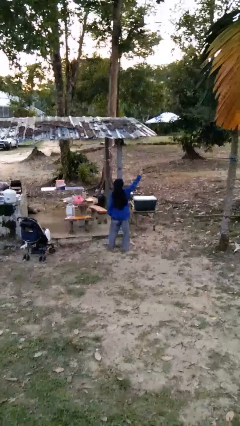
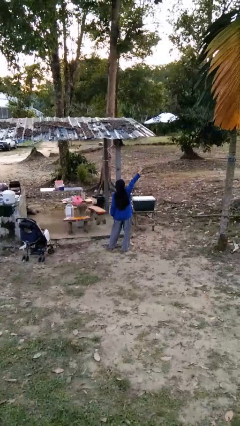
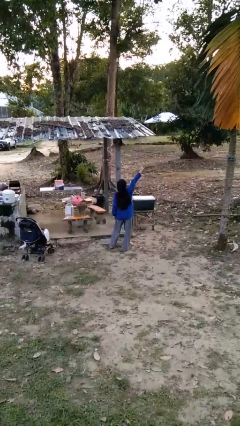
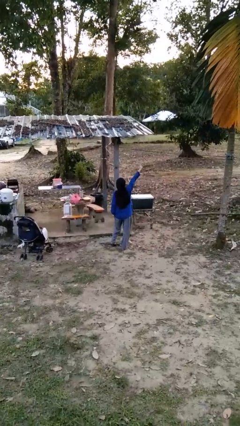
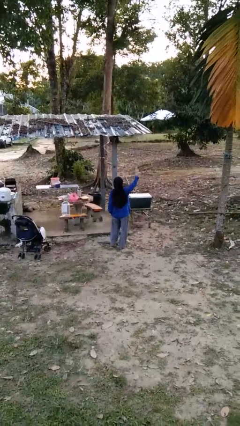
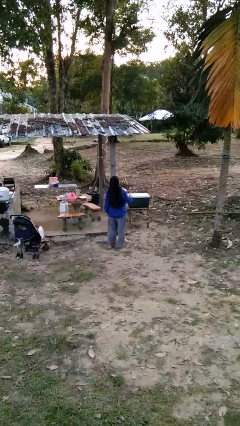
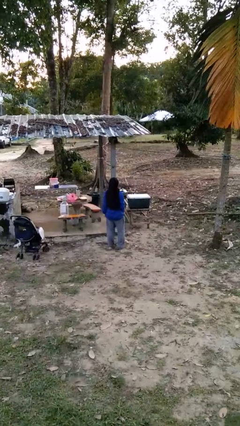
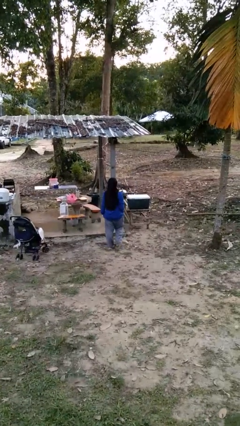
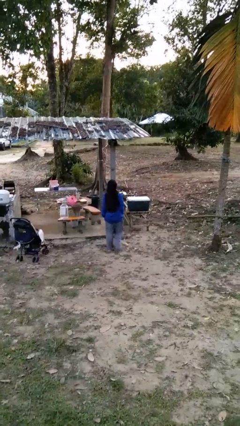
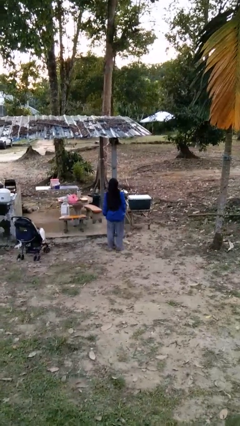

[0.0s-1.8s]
person gestures number three

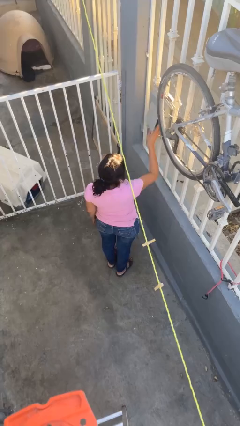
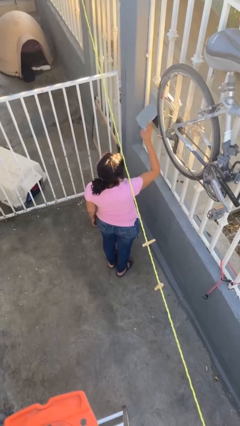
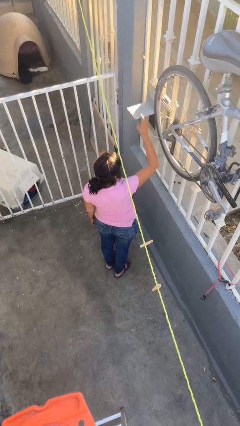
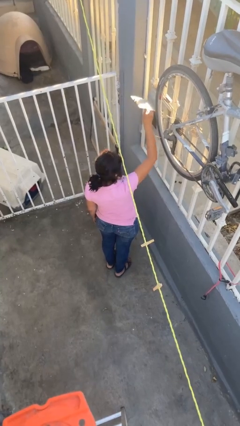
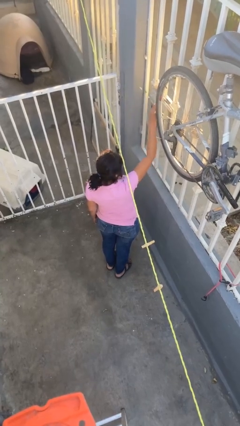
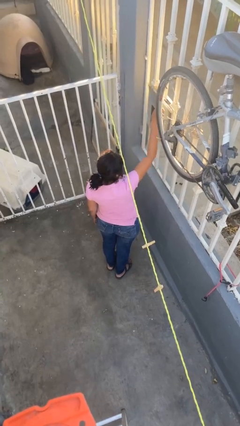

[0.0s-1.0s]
person opens mailbox

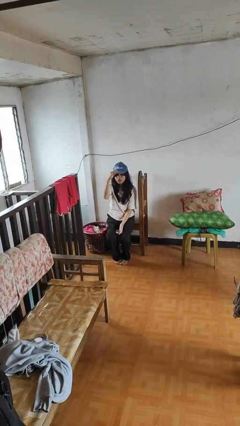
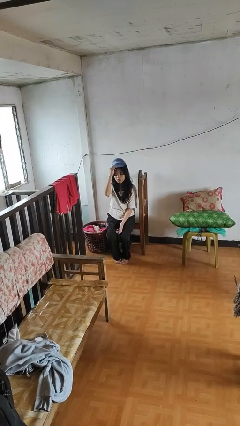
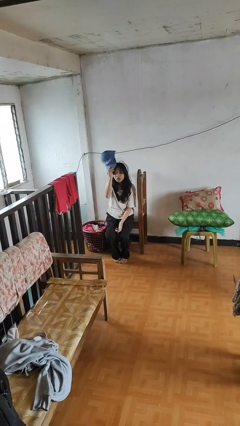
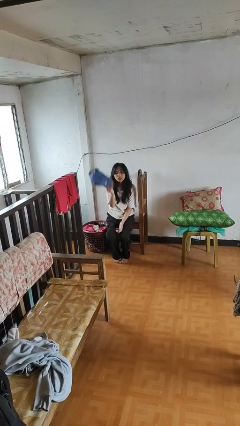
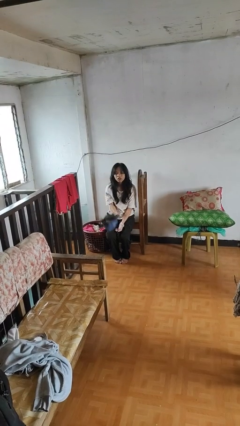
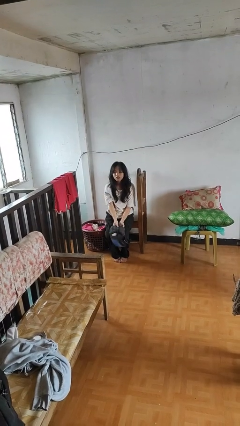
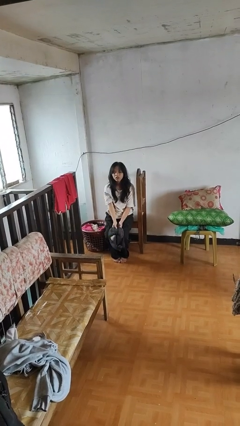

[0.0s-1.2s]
person takes off hat

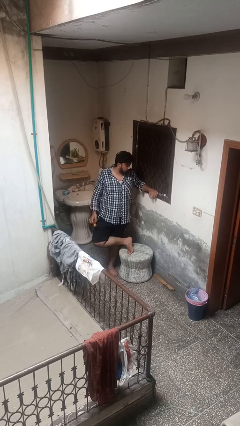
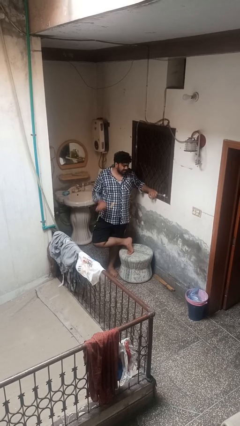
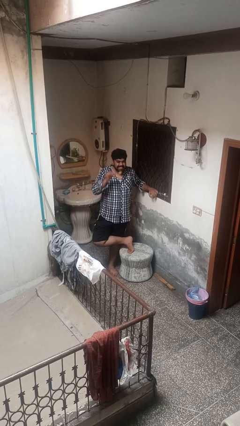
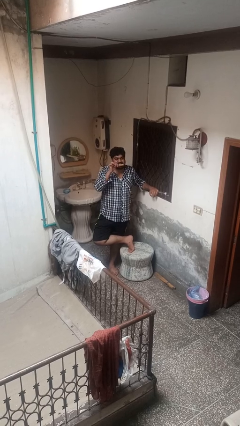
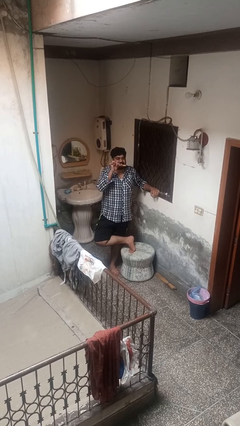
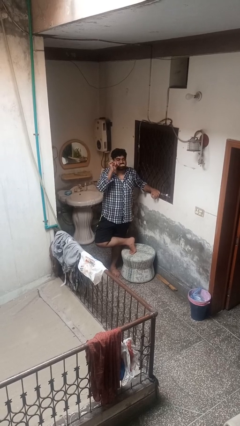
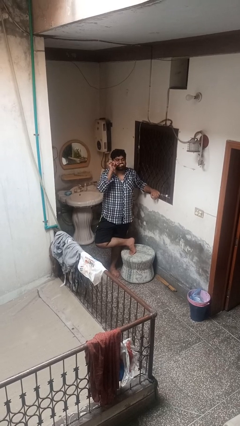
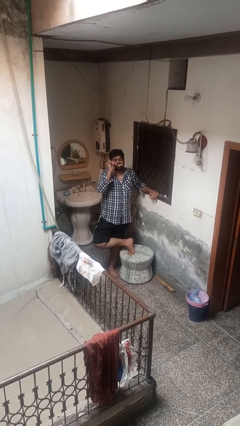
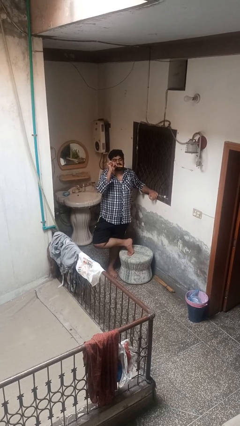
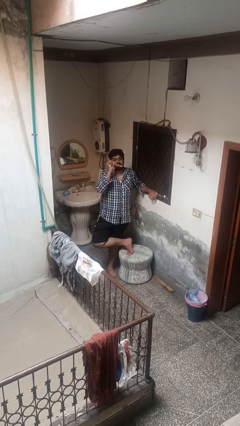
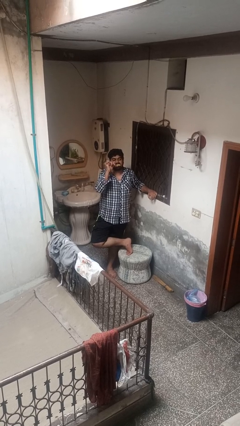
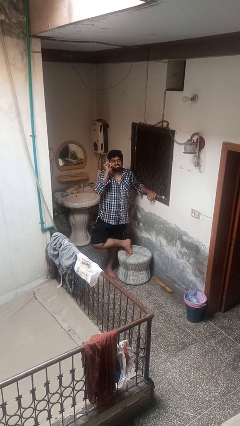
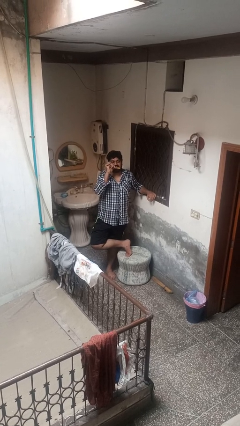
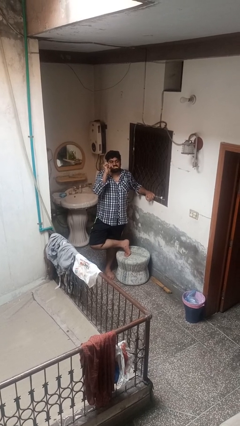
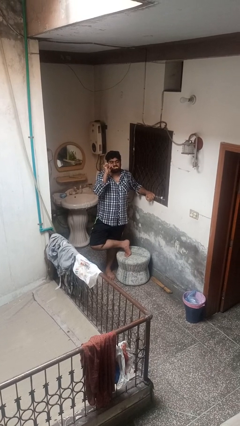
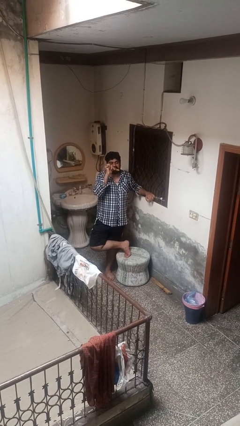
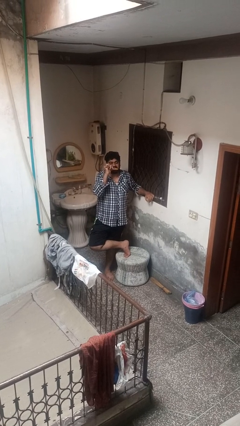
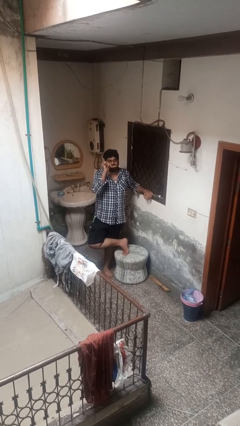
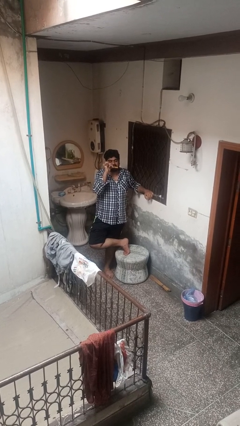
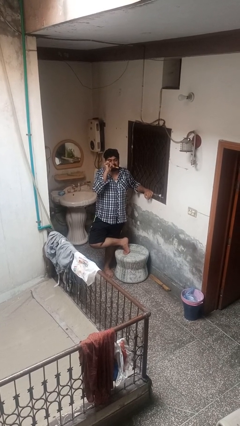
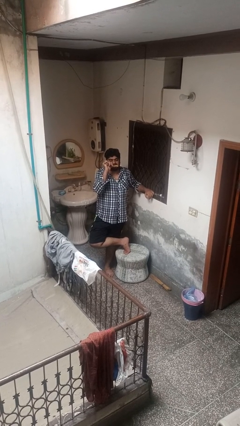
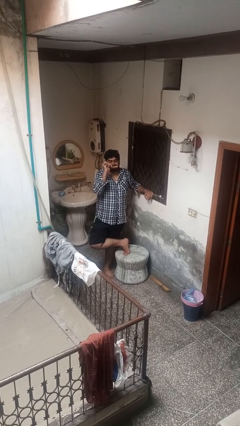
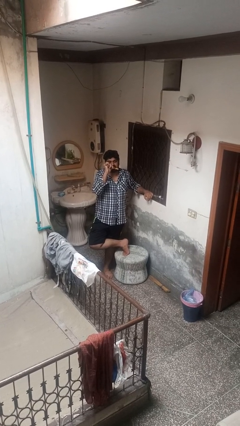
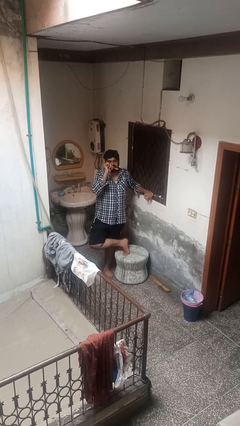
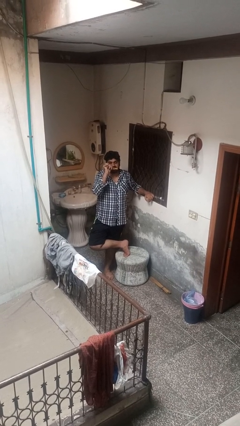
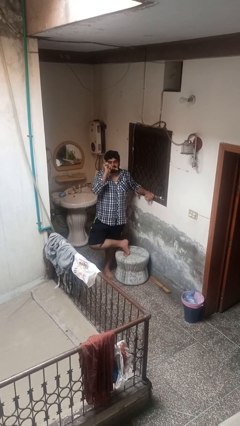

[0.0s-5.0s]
person brushes teeth

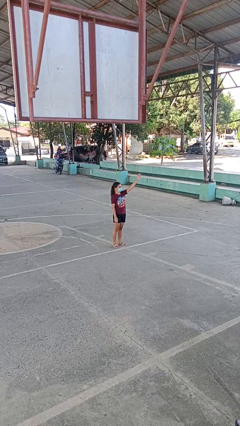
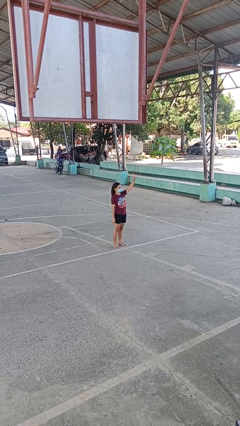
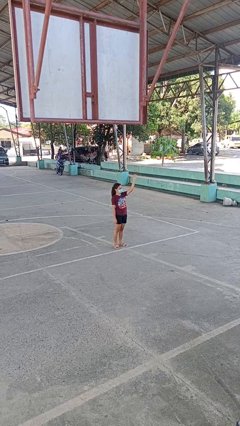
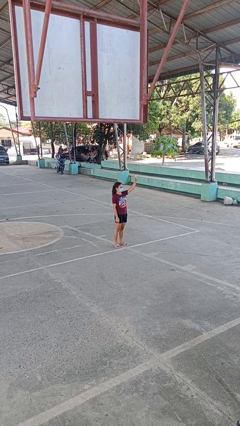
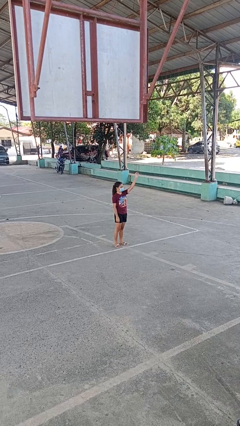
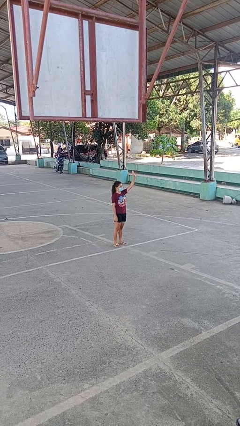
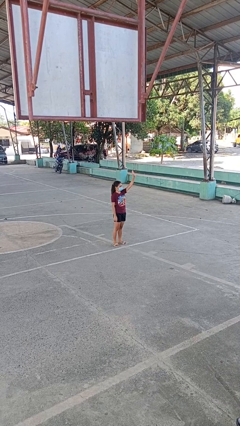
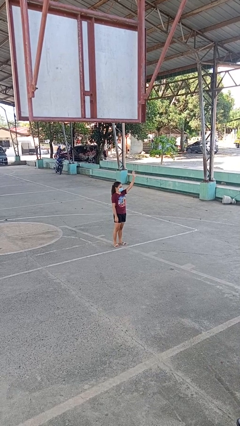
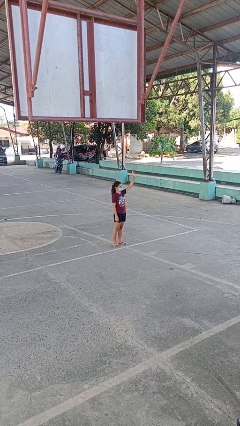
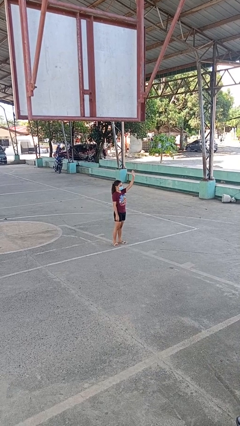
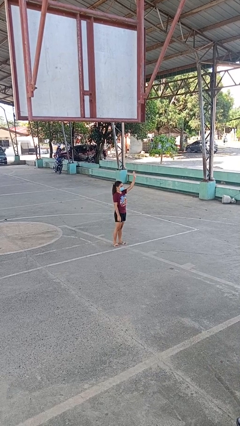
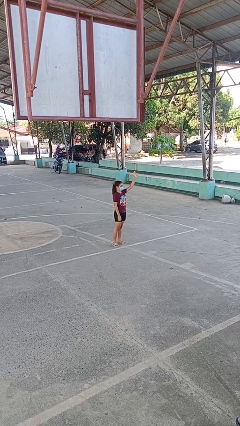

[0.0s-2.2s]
person waves at person

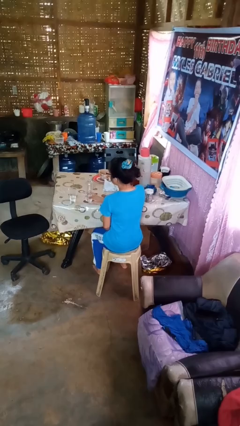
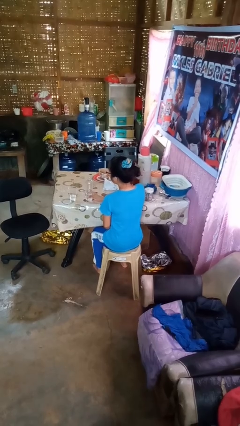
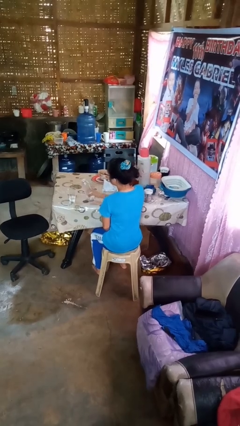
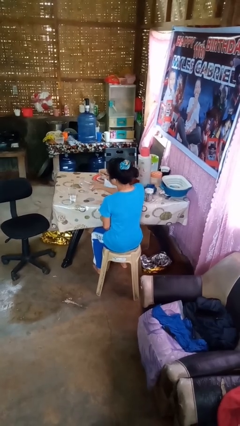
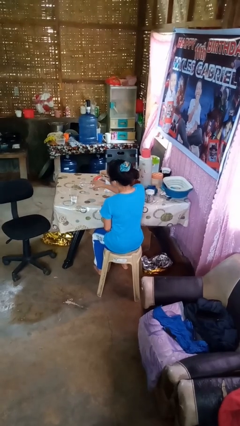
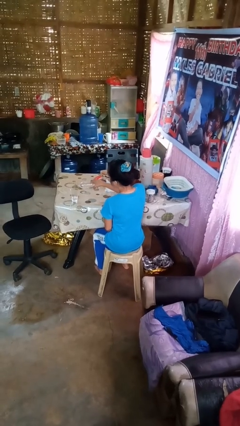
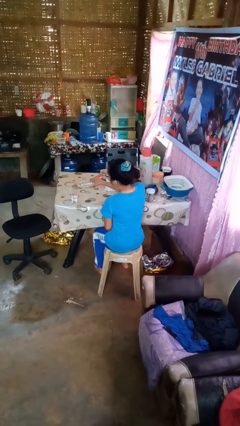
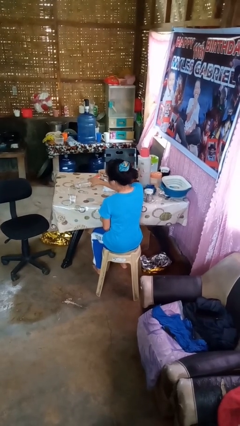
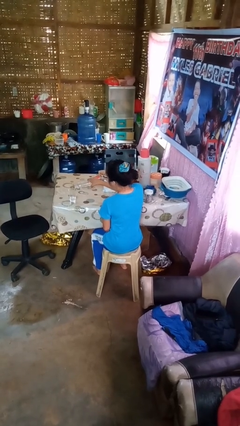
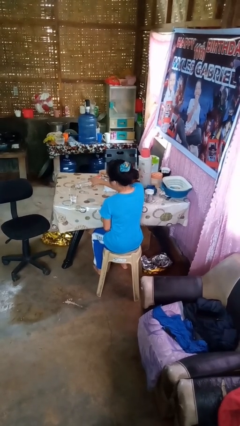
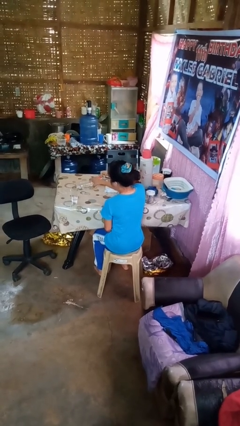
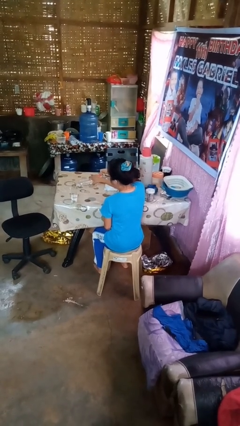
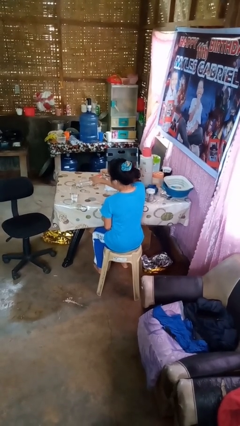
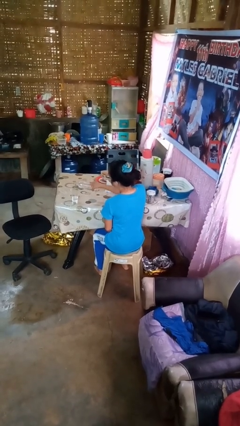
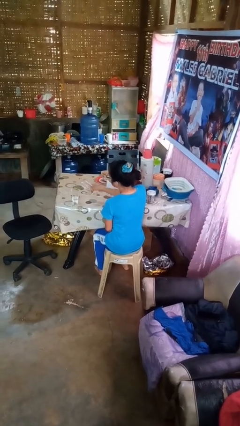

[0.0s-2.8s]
person pours liquid into cup

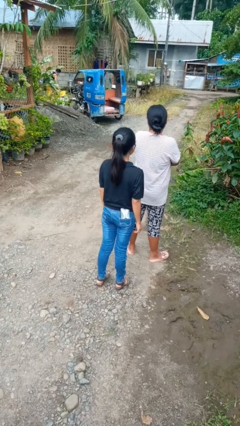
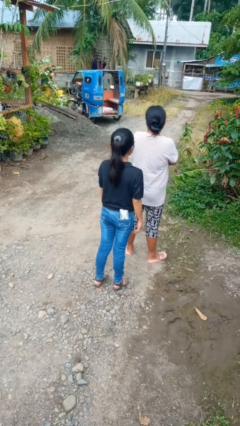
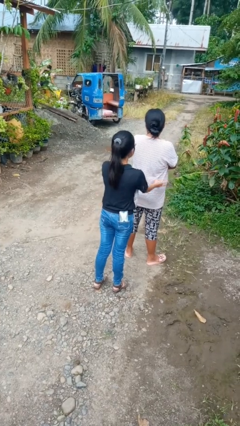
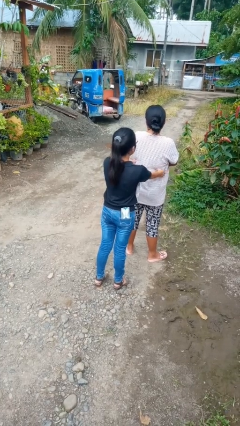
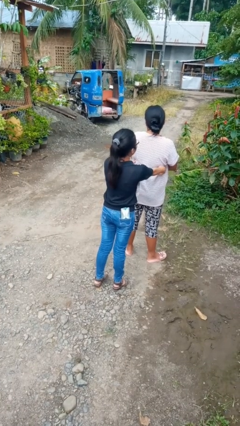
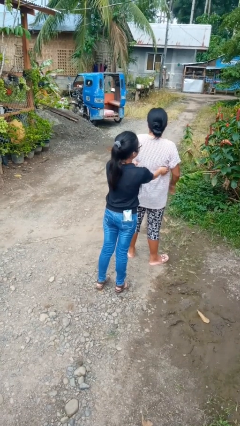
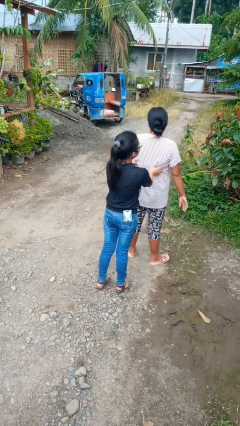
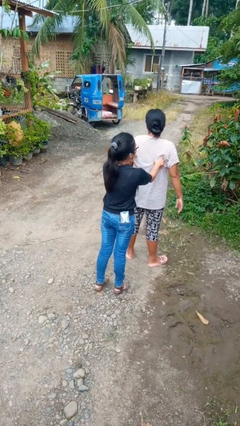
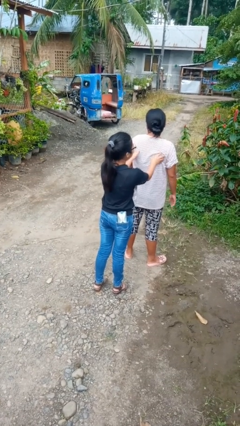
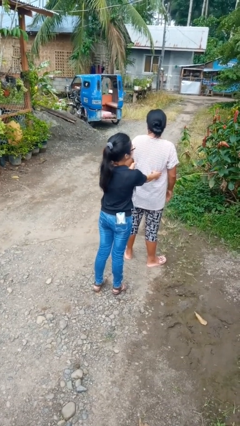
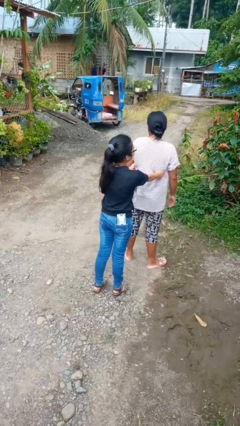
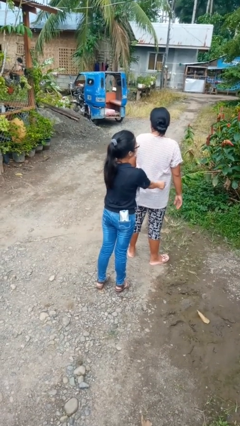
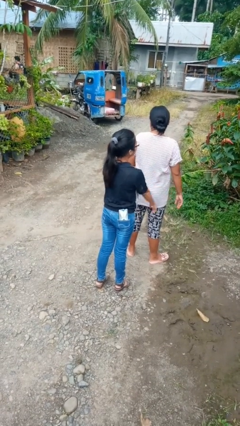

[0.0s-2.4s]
person tickles person

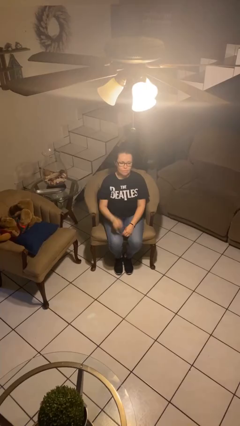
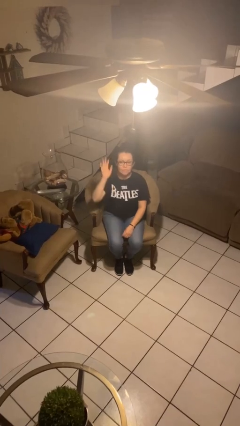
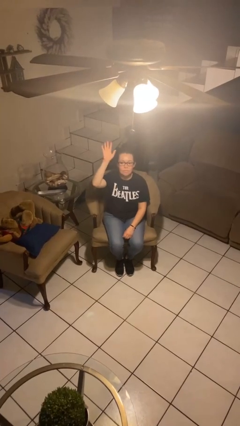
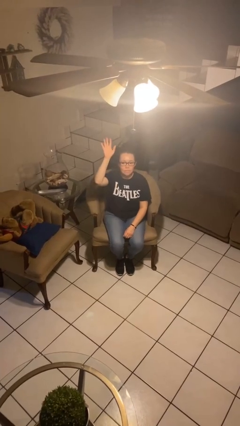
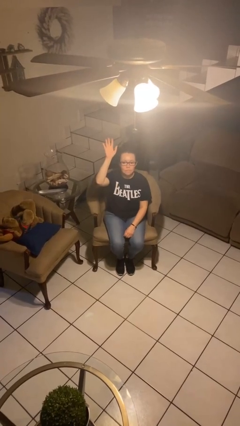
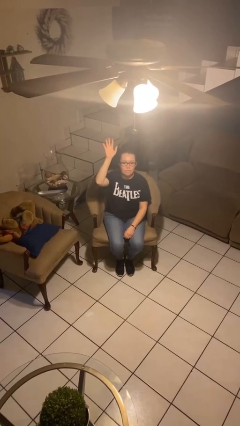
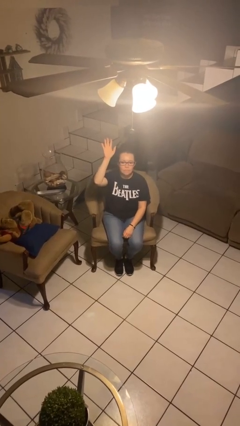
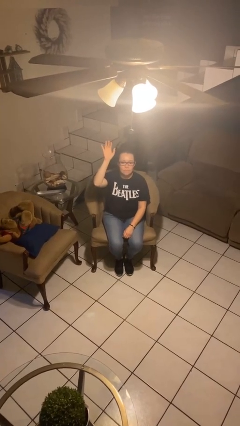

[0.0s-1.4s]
person gestures raise hand
